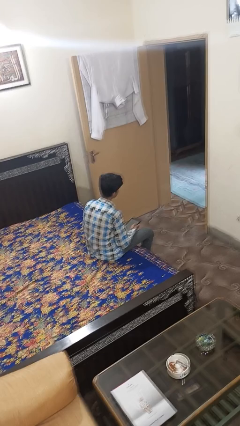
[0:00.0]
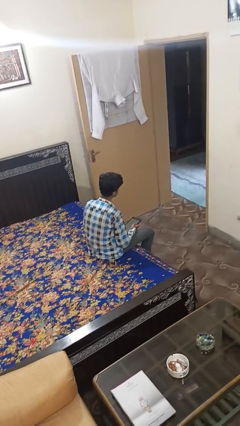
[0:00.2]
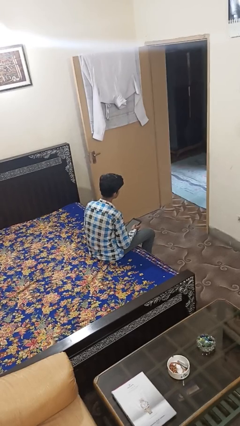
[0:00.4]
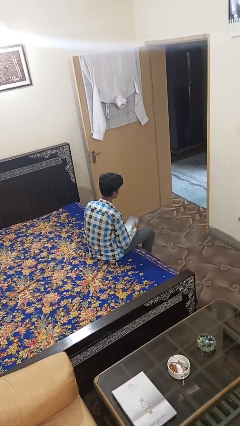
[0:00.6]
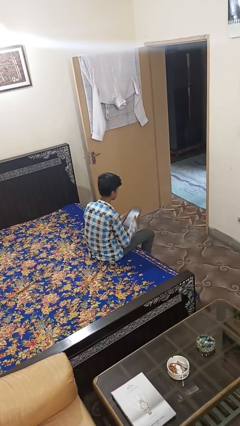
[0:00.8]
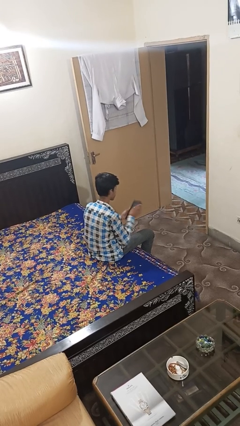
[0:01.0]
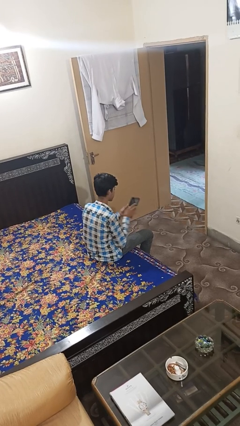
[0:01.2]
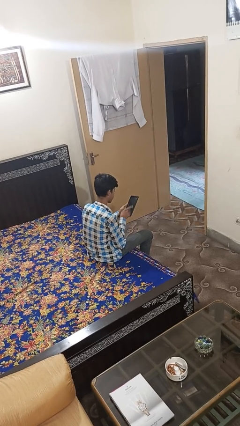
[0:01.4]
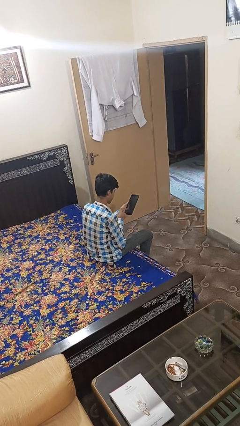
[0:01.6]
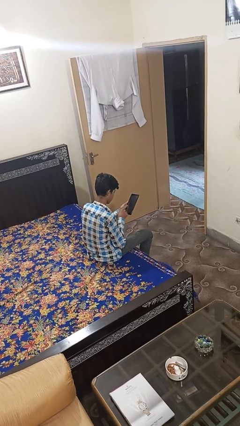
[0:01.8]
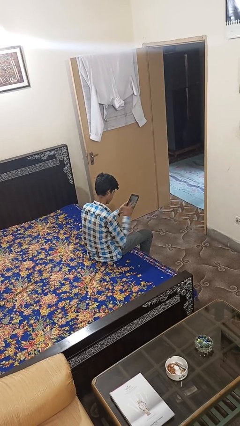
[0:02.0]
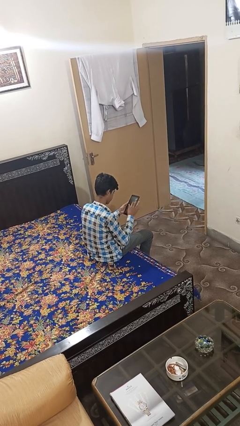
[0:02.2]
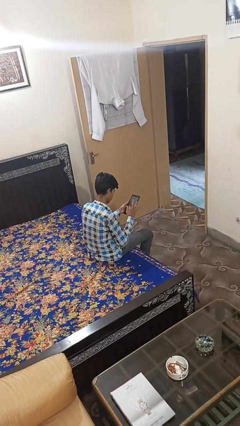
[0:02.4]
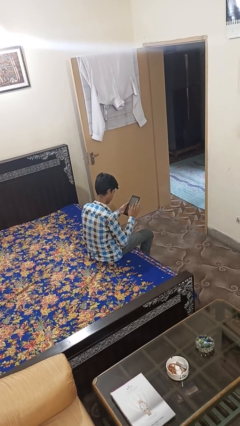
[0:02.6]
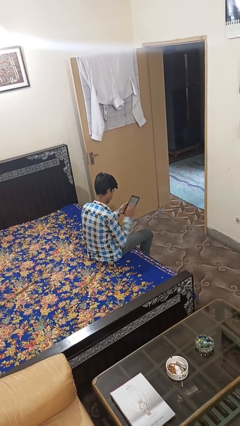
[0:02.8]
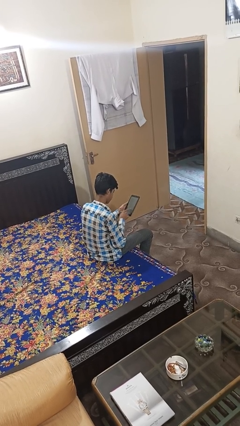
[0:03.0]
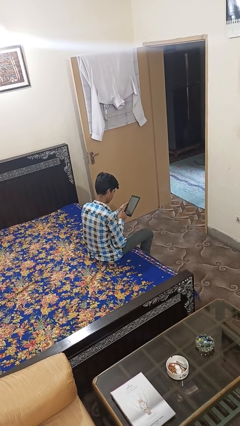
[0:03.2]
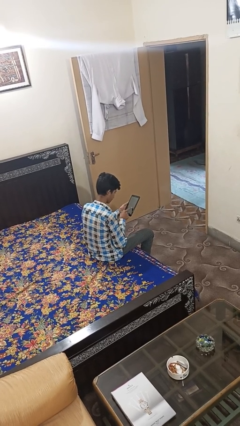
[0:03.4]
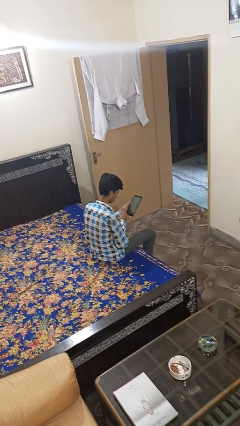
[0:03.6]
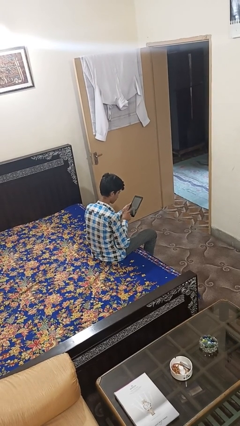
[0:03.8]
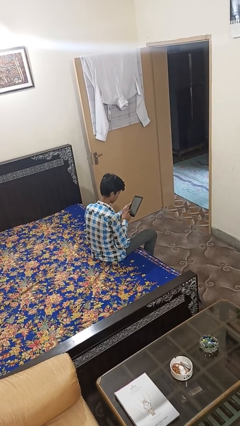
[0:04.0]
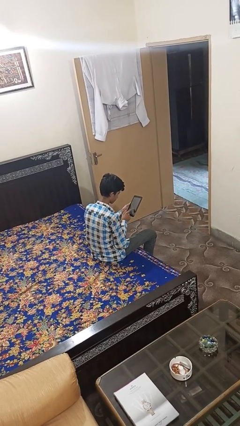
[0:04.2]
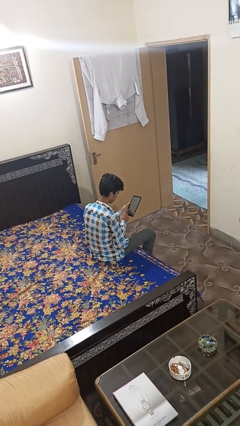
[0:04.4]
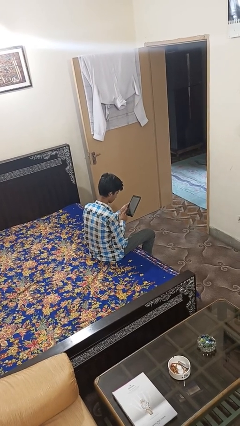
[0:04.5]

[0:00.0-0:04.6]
person interacts with tablet

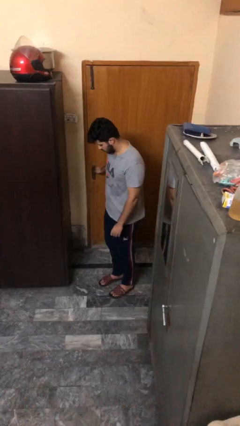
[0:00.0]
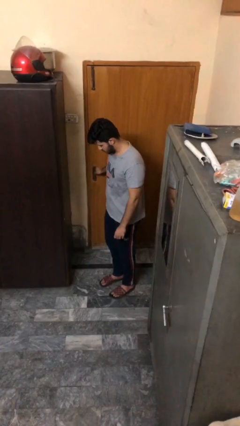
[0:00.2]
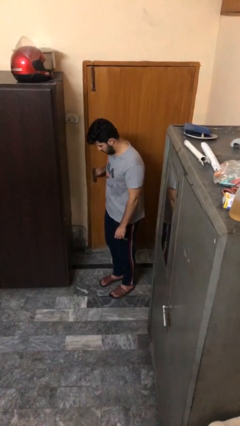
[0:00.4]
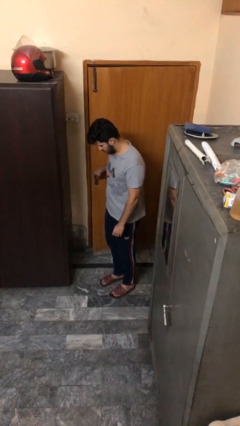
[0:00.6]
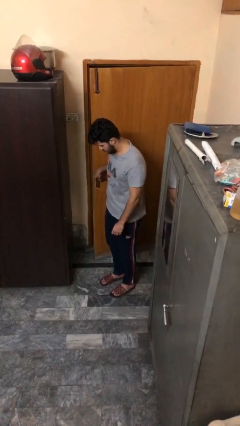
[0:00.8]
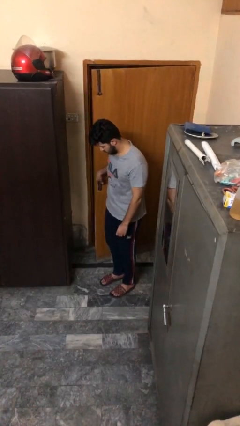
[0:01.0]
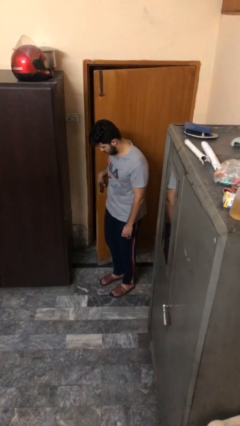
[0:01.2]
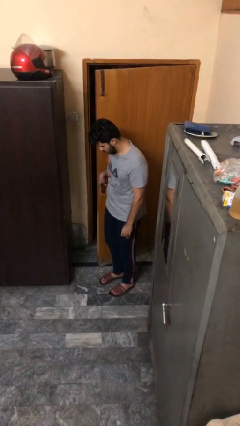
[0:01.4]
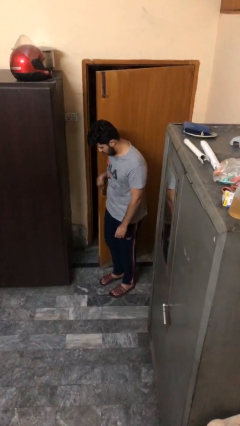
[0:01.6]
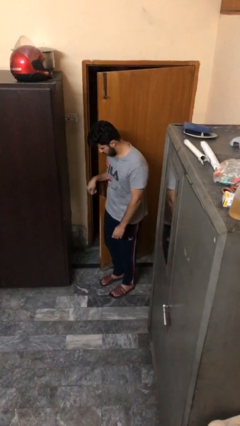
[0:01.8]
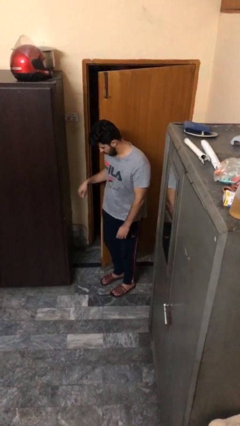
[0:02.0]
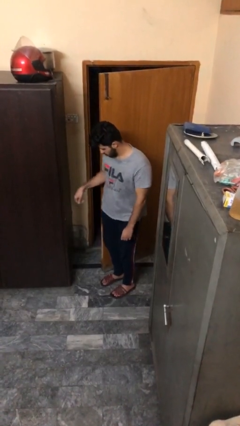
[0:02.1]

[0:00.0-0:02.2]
person opens facility door

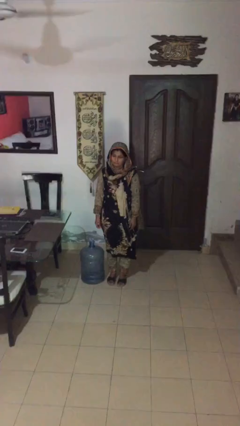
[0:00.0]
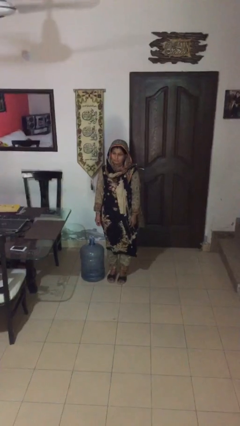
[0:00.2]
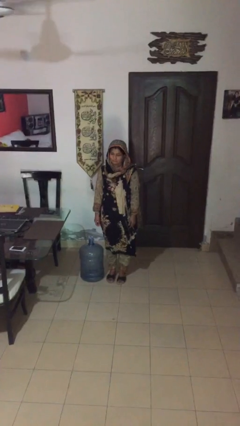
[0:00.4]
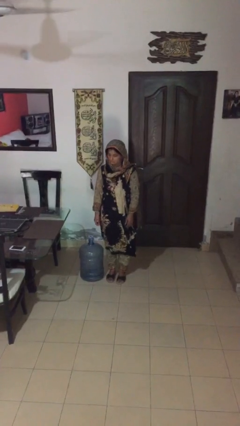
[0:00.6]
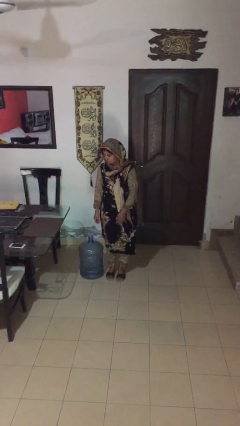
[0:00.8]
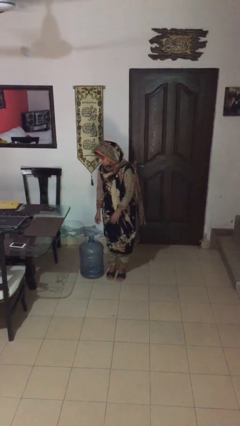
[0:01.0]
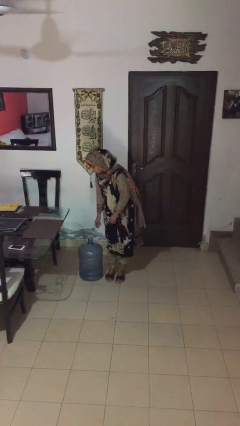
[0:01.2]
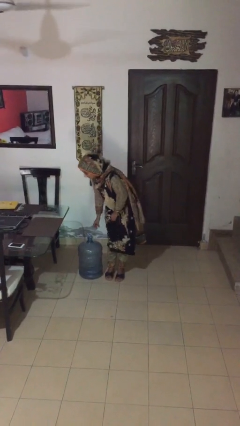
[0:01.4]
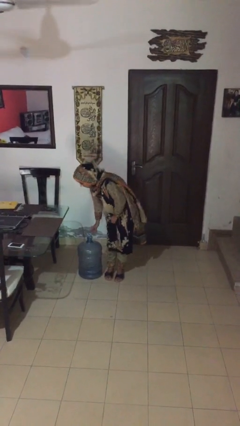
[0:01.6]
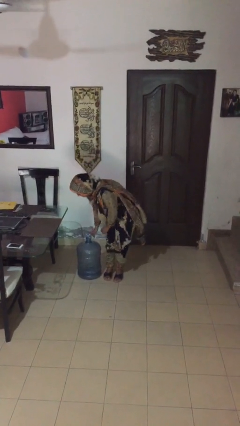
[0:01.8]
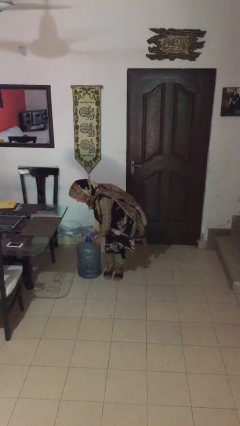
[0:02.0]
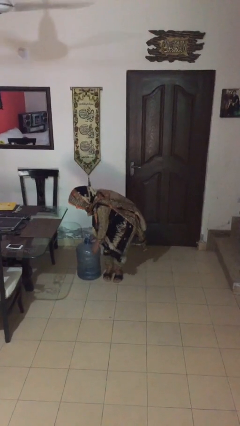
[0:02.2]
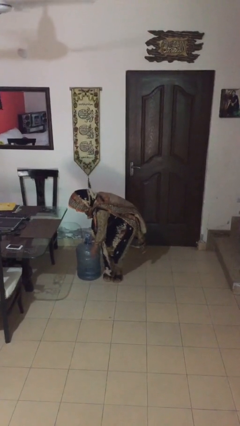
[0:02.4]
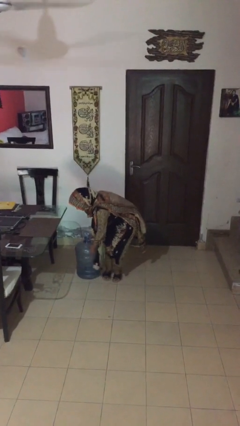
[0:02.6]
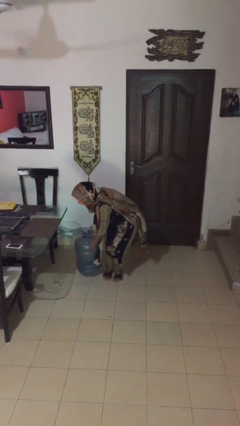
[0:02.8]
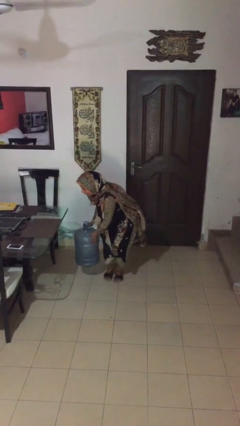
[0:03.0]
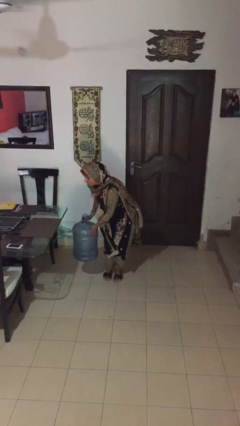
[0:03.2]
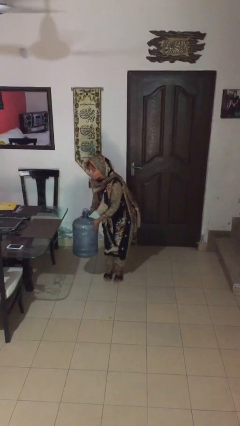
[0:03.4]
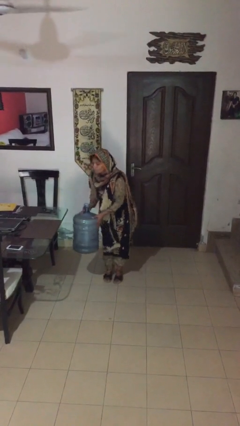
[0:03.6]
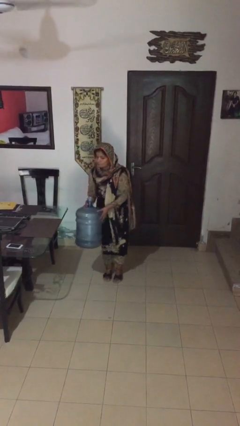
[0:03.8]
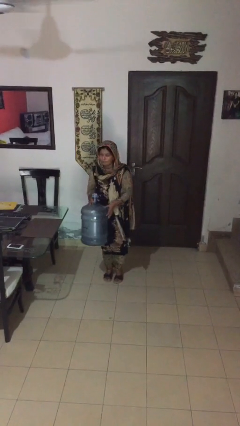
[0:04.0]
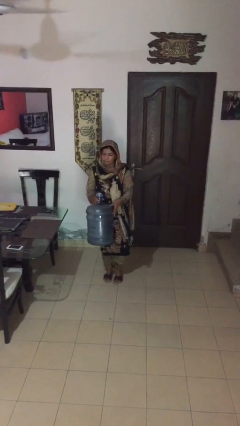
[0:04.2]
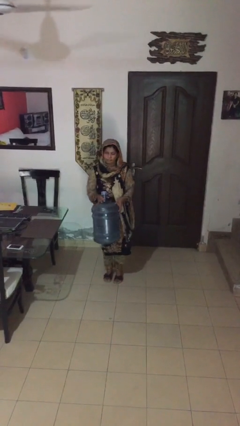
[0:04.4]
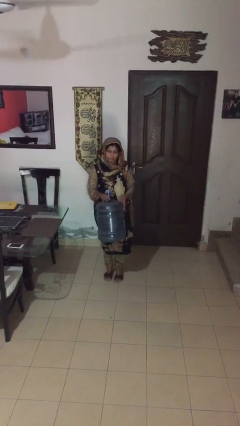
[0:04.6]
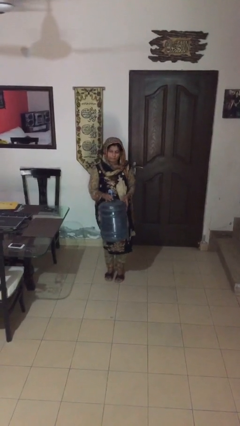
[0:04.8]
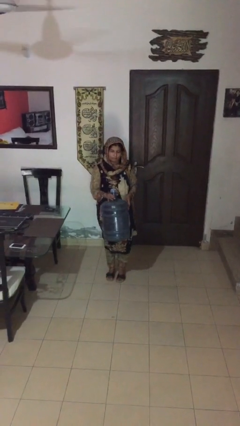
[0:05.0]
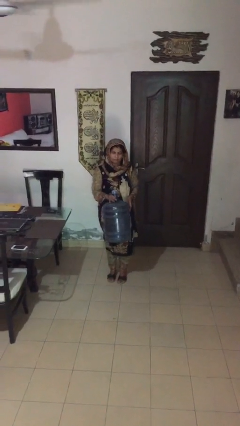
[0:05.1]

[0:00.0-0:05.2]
person picks up object from floor

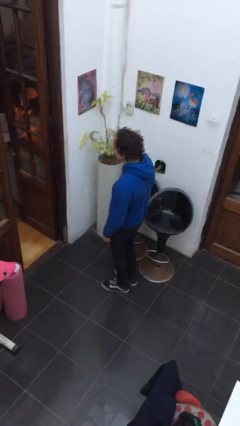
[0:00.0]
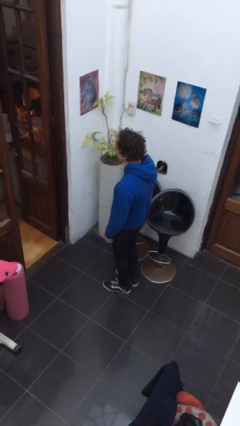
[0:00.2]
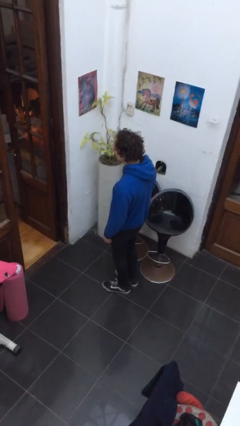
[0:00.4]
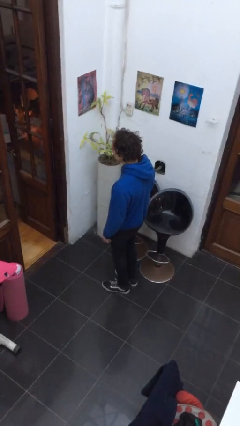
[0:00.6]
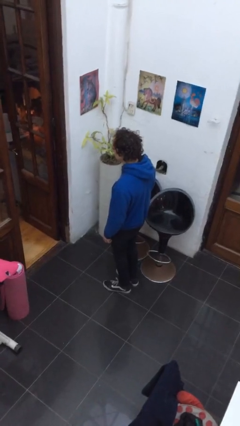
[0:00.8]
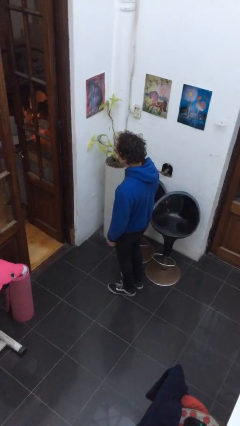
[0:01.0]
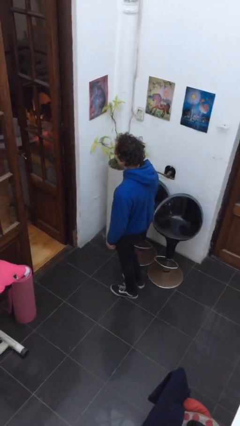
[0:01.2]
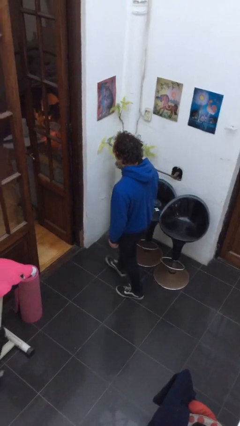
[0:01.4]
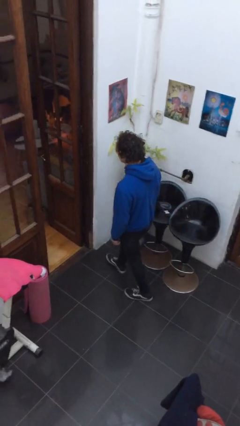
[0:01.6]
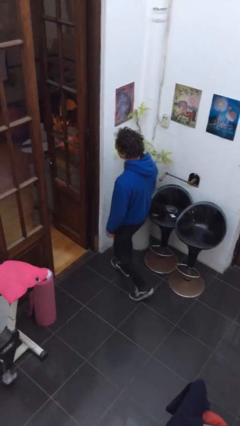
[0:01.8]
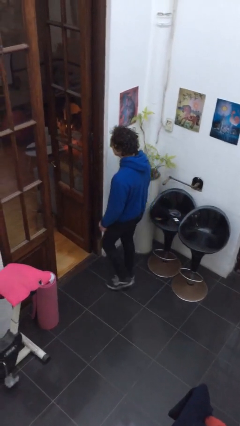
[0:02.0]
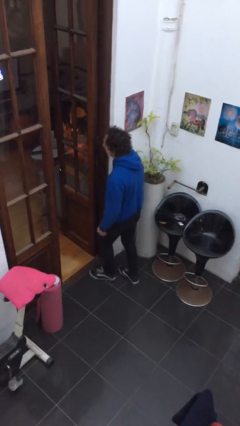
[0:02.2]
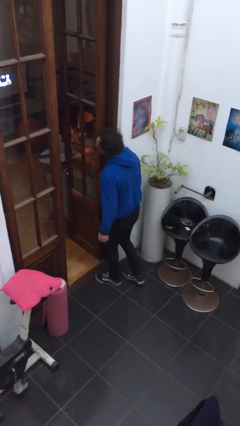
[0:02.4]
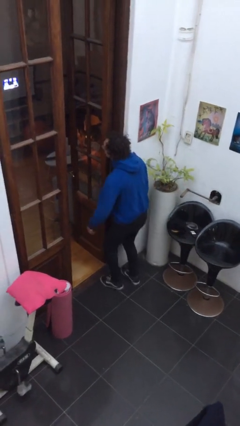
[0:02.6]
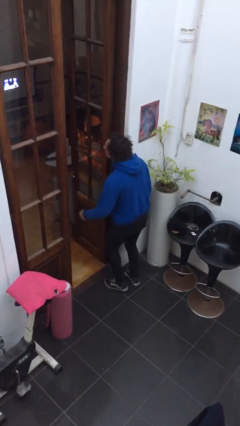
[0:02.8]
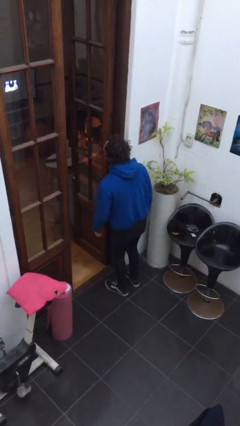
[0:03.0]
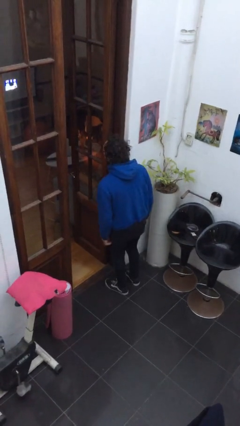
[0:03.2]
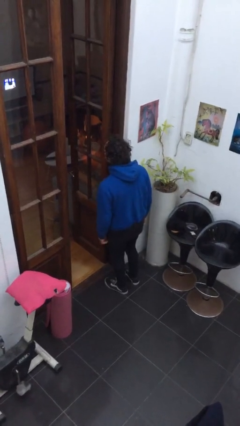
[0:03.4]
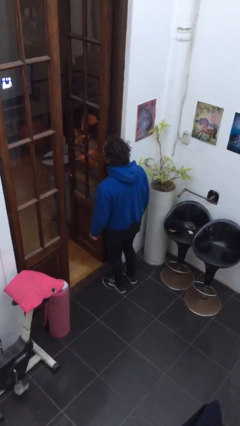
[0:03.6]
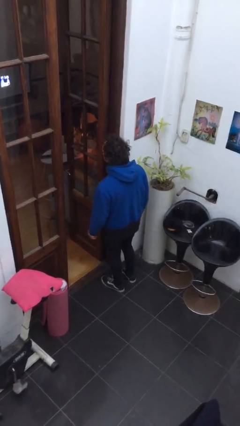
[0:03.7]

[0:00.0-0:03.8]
person bumps into wall

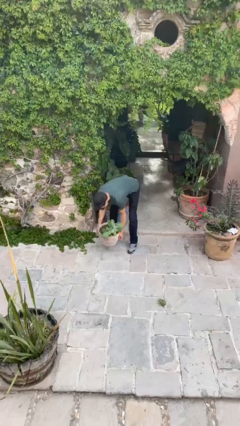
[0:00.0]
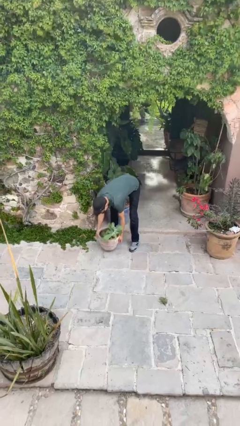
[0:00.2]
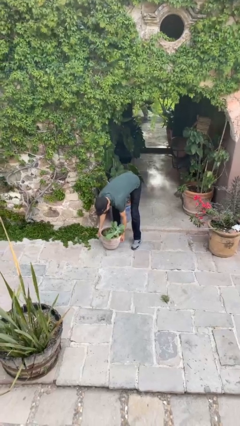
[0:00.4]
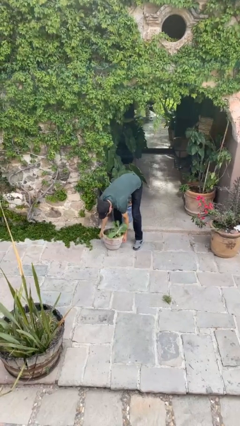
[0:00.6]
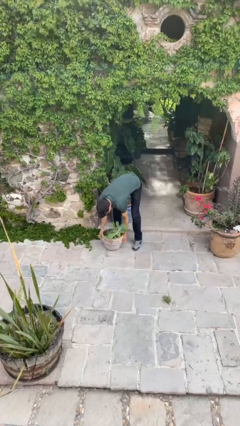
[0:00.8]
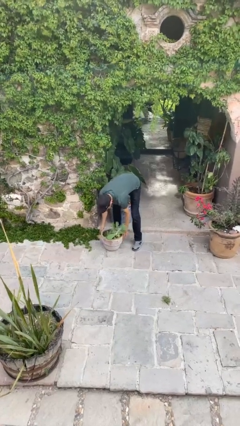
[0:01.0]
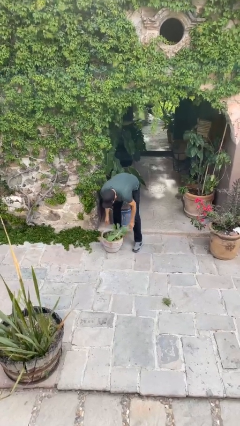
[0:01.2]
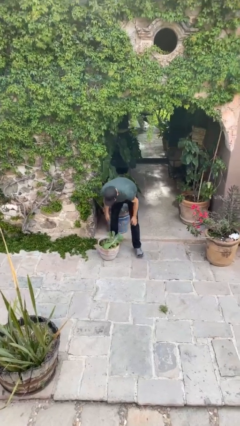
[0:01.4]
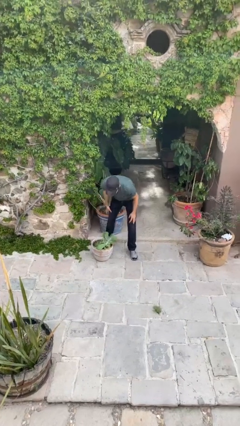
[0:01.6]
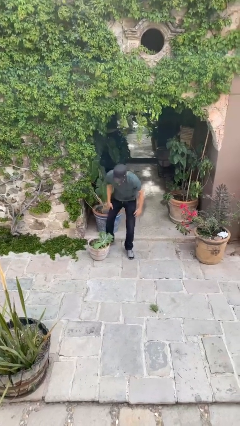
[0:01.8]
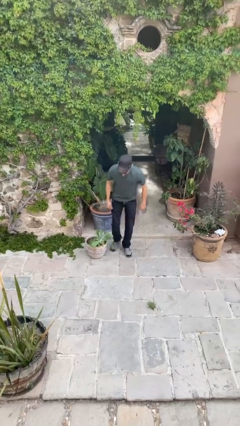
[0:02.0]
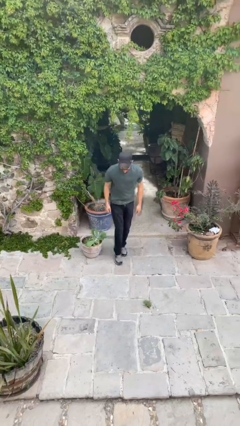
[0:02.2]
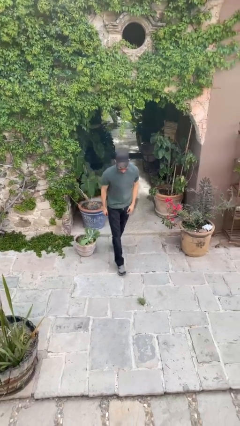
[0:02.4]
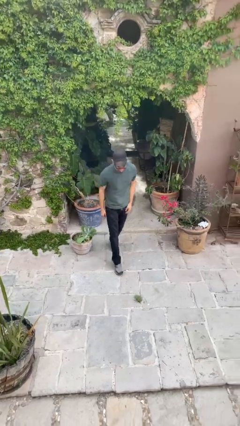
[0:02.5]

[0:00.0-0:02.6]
person puts down object on floor
